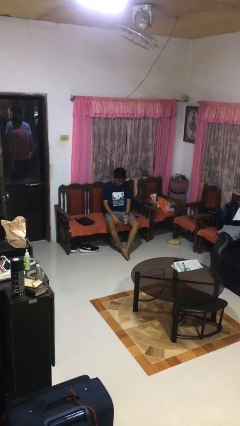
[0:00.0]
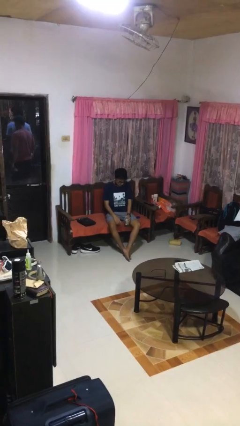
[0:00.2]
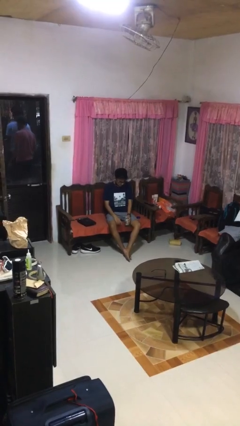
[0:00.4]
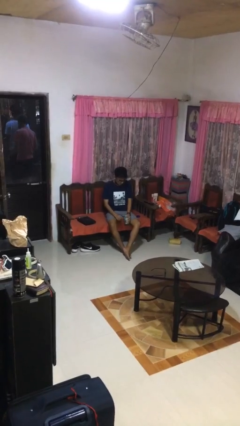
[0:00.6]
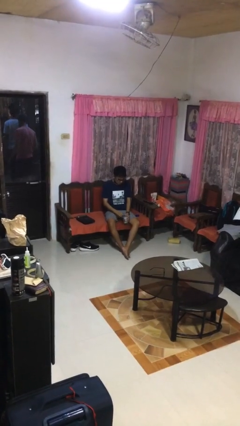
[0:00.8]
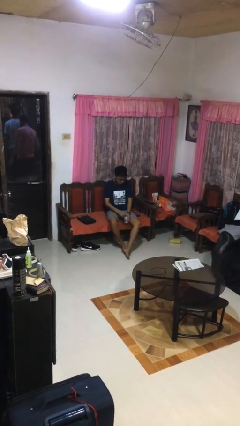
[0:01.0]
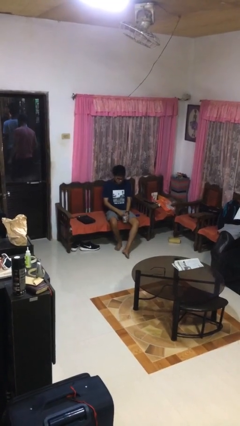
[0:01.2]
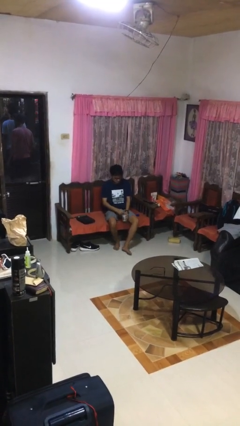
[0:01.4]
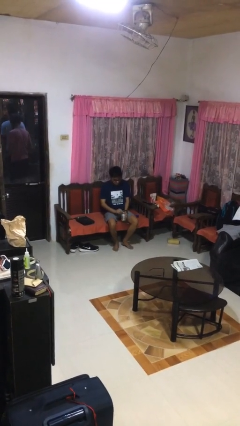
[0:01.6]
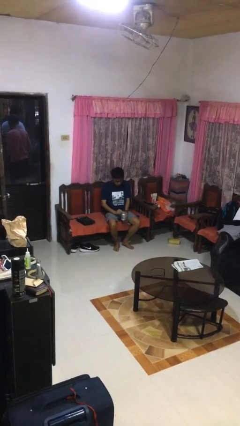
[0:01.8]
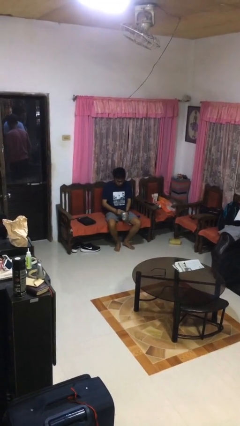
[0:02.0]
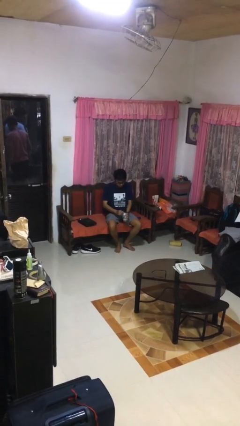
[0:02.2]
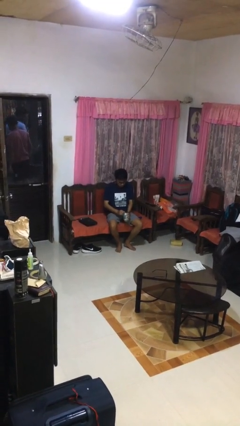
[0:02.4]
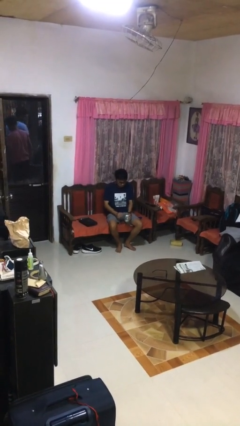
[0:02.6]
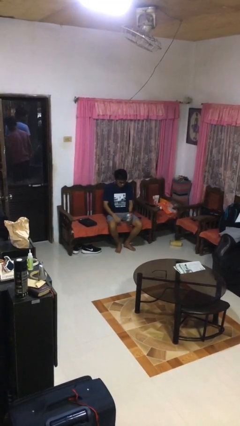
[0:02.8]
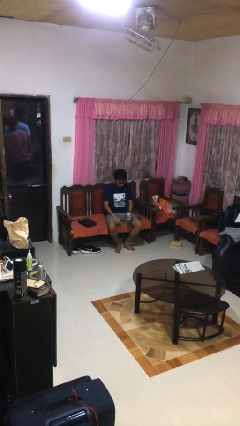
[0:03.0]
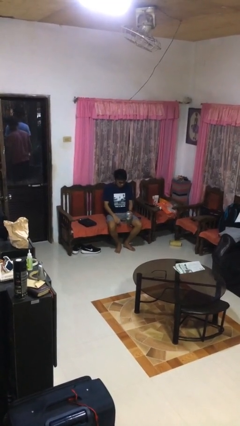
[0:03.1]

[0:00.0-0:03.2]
person opens beverage can

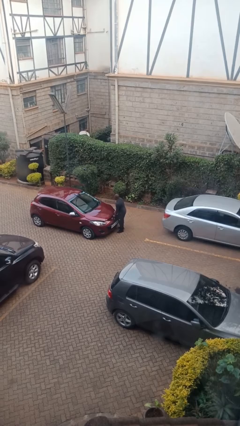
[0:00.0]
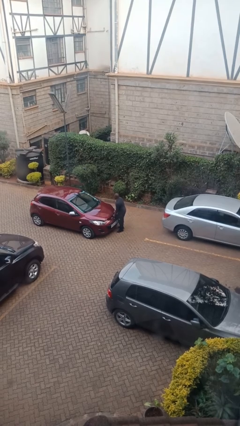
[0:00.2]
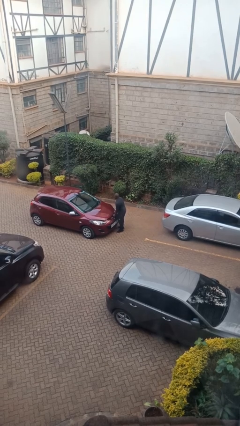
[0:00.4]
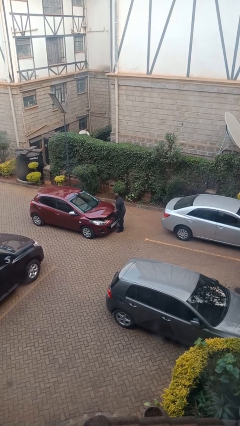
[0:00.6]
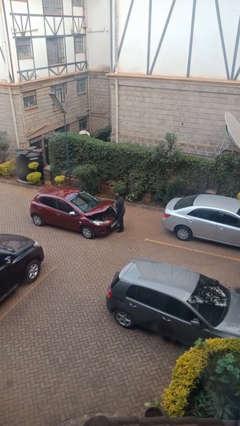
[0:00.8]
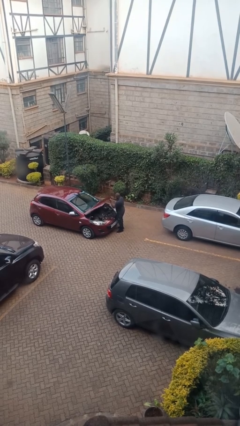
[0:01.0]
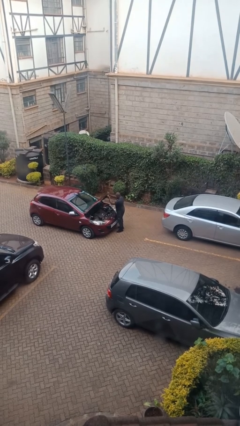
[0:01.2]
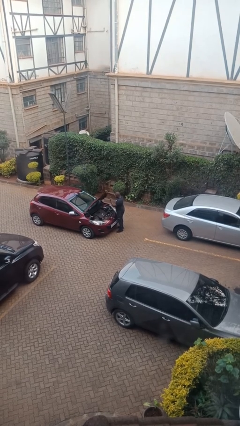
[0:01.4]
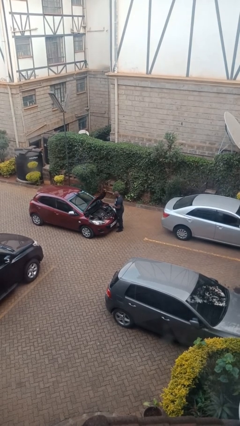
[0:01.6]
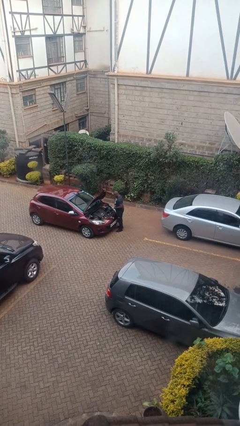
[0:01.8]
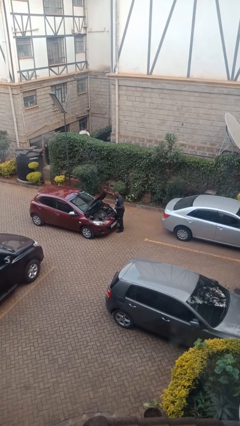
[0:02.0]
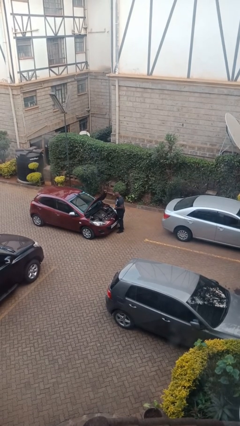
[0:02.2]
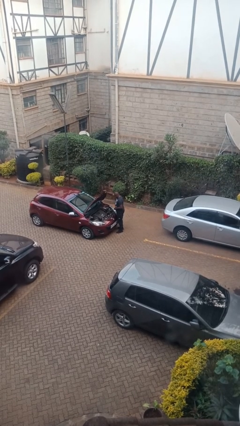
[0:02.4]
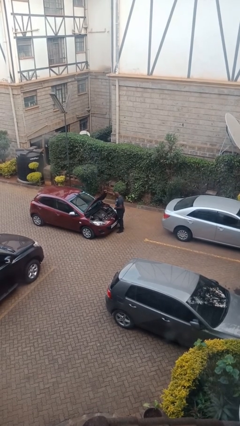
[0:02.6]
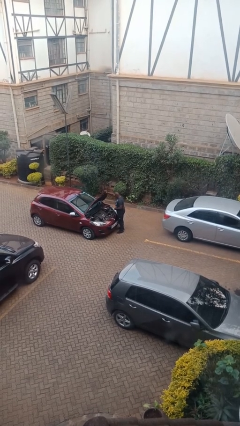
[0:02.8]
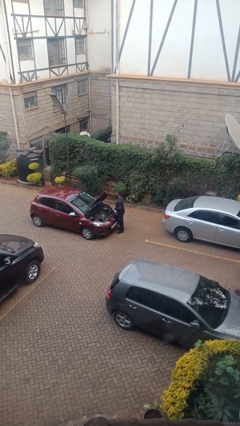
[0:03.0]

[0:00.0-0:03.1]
person opens car hood

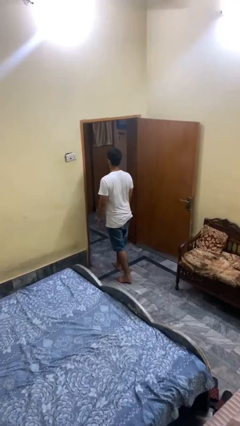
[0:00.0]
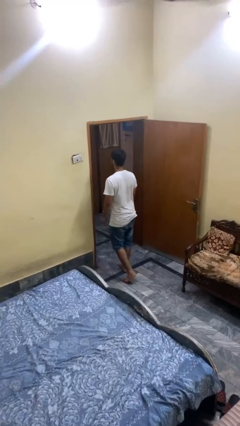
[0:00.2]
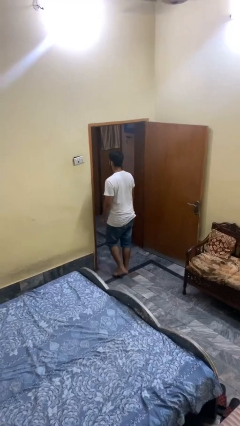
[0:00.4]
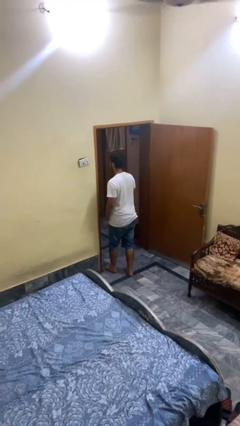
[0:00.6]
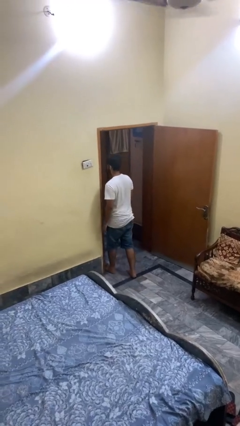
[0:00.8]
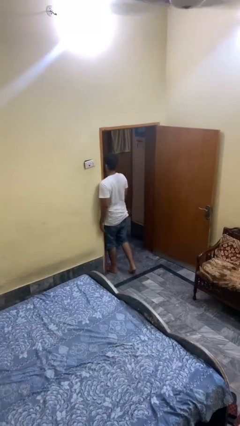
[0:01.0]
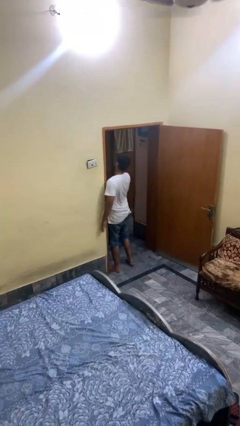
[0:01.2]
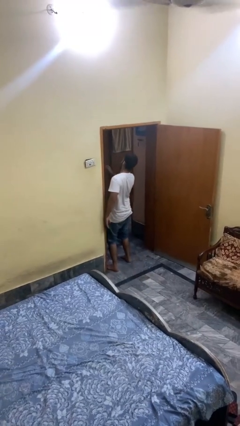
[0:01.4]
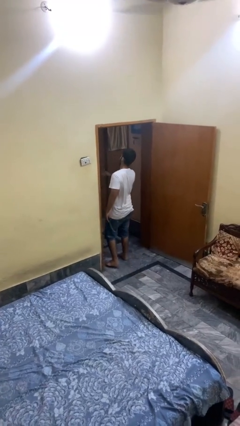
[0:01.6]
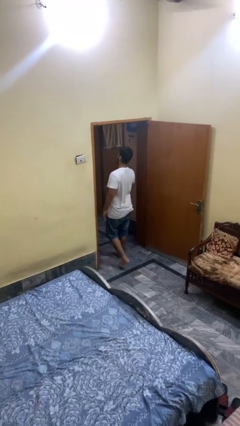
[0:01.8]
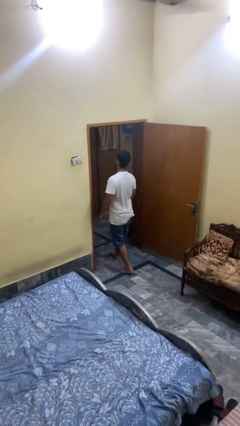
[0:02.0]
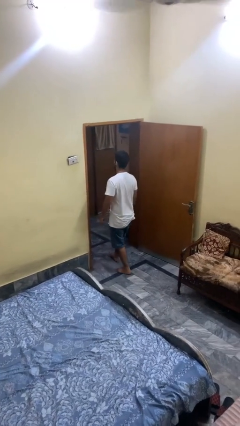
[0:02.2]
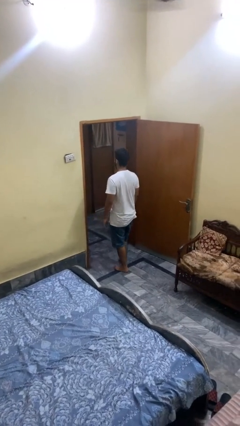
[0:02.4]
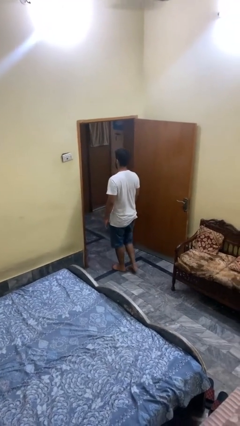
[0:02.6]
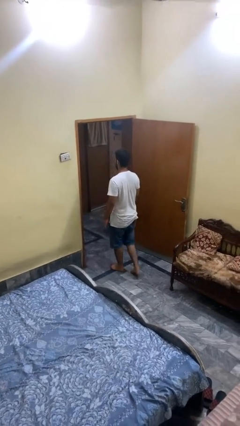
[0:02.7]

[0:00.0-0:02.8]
person bumps into wall

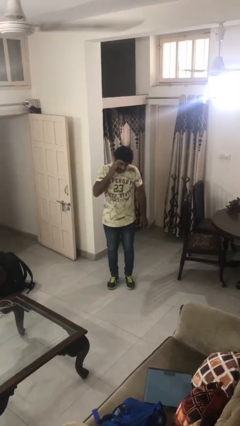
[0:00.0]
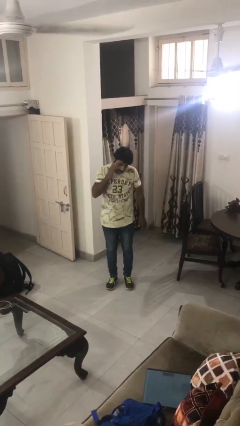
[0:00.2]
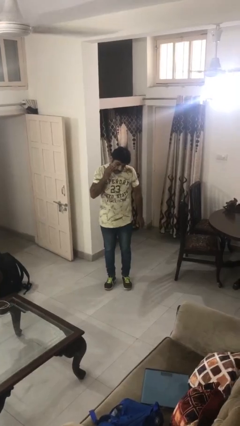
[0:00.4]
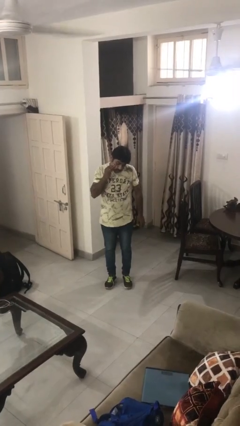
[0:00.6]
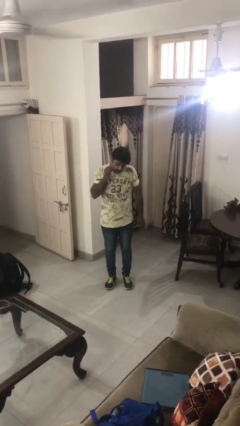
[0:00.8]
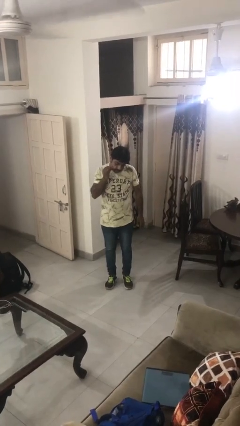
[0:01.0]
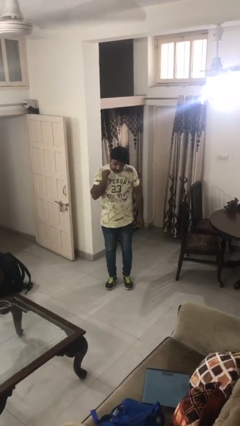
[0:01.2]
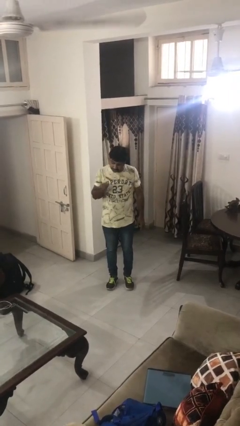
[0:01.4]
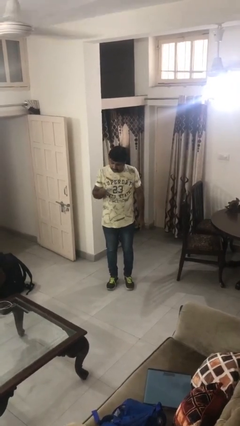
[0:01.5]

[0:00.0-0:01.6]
person swats bug

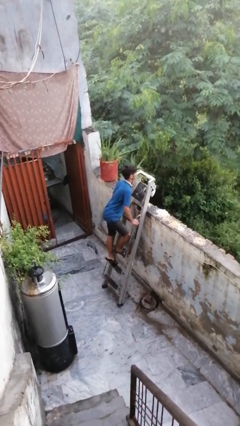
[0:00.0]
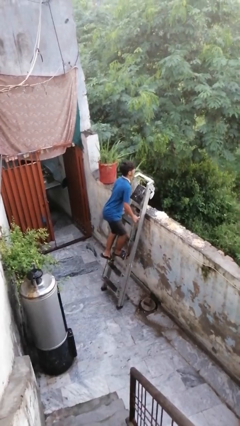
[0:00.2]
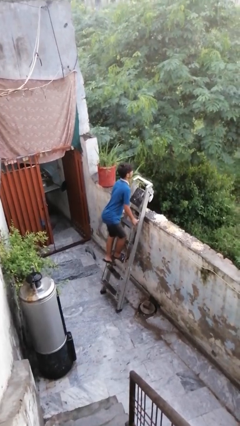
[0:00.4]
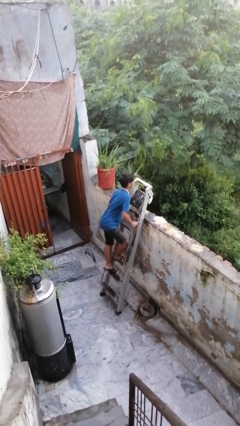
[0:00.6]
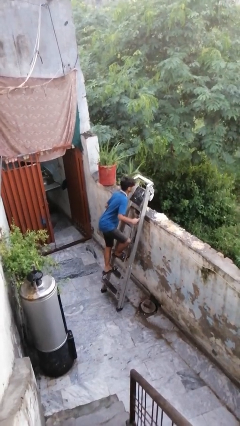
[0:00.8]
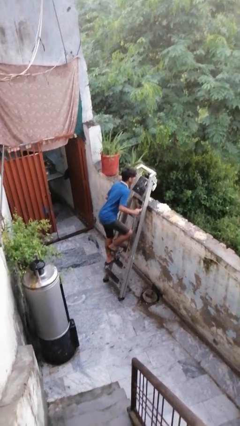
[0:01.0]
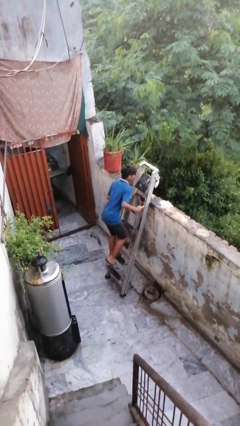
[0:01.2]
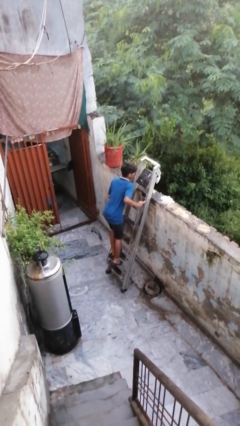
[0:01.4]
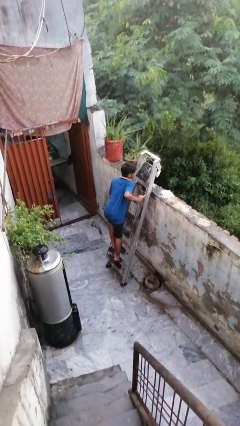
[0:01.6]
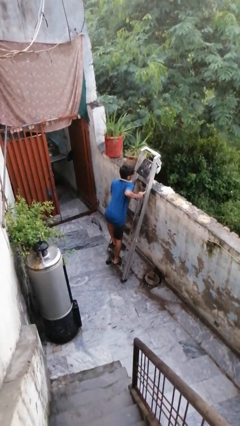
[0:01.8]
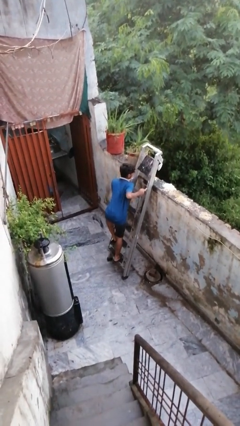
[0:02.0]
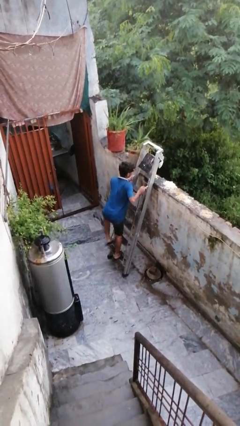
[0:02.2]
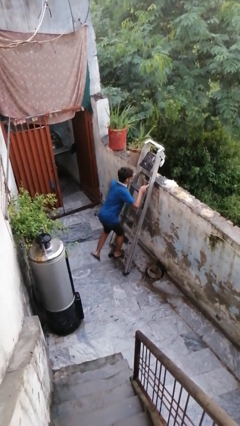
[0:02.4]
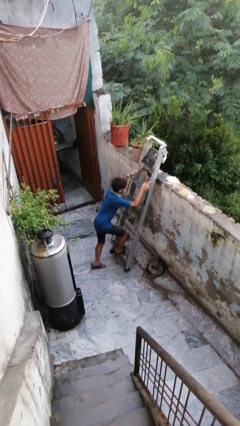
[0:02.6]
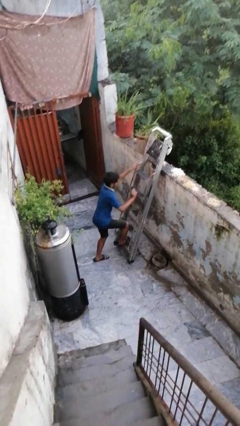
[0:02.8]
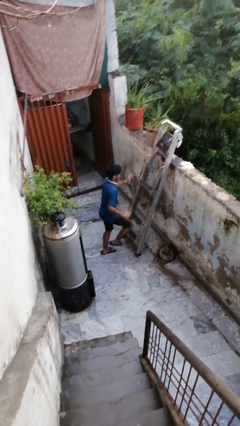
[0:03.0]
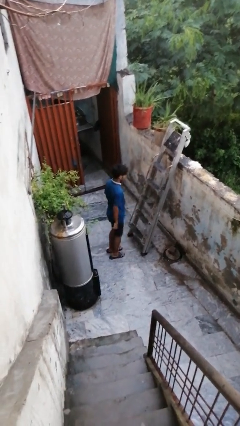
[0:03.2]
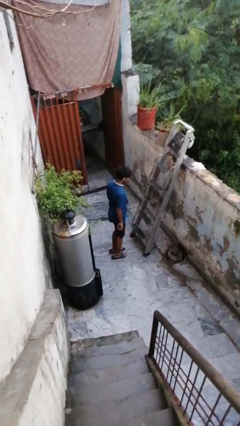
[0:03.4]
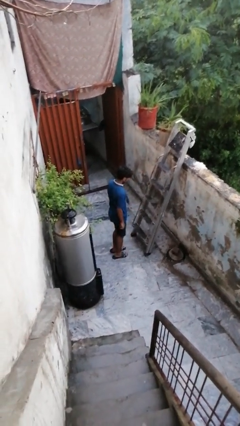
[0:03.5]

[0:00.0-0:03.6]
person climbs down ladder

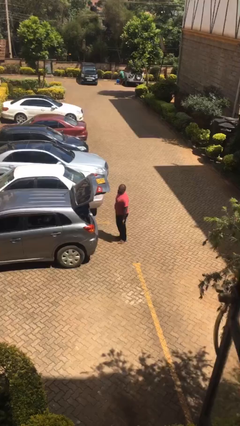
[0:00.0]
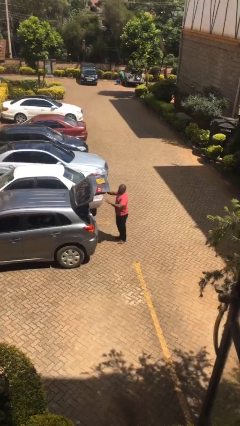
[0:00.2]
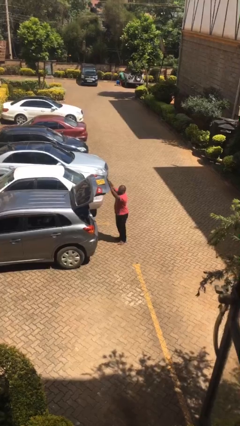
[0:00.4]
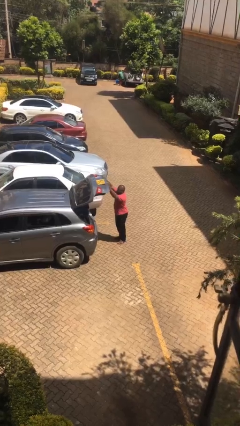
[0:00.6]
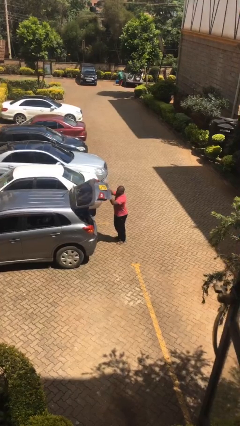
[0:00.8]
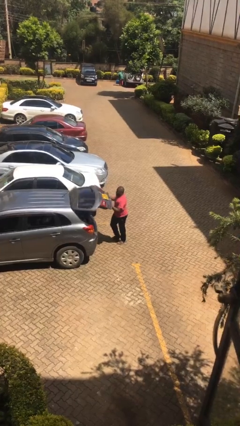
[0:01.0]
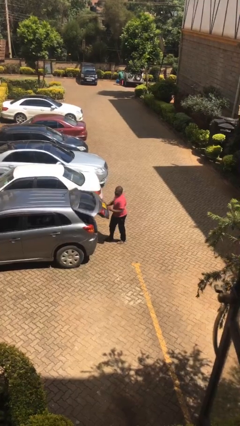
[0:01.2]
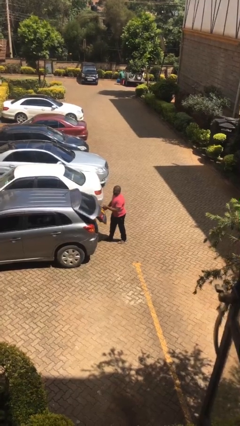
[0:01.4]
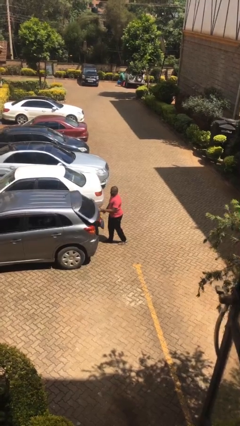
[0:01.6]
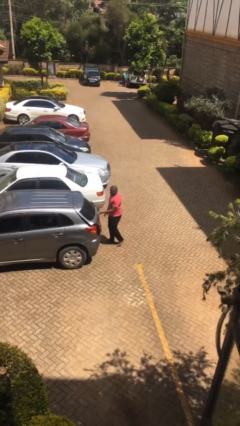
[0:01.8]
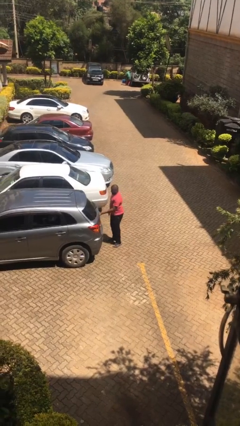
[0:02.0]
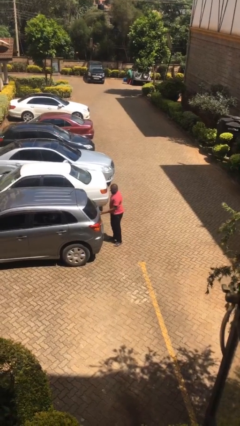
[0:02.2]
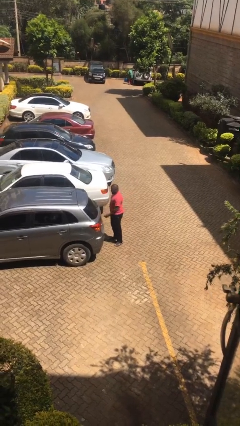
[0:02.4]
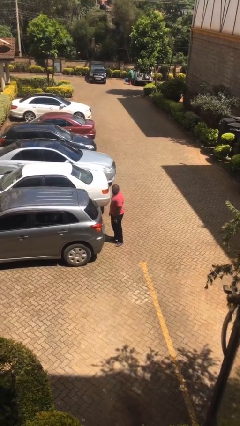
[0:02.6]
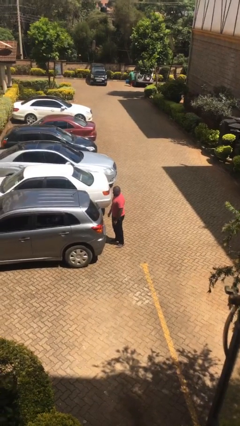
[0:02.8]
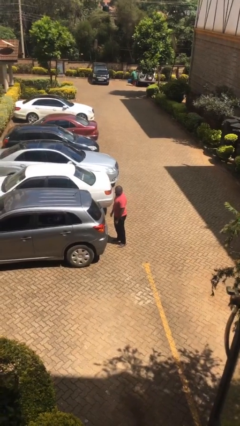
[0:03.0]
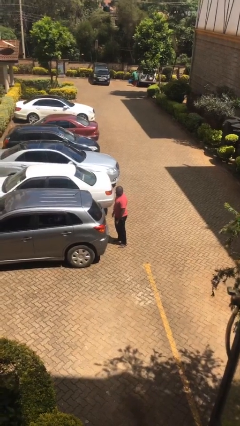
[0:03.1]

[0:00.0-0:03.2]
person closes car trunk
